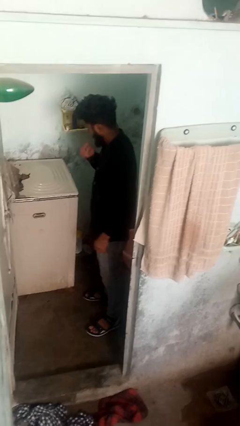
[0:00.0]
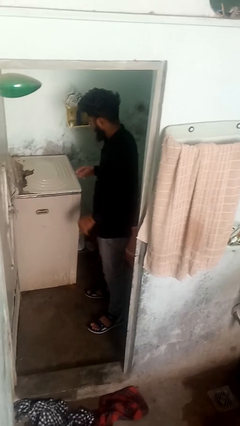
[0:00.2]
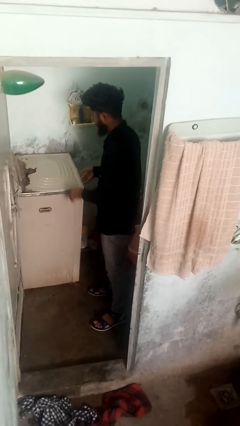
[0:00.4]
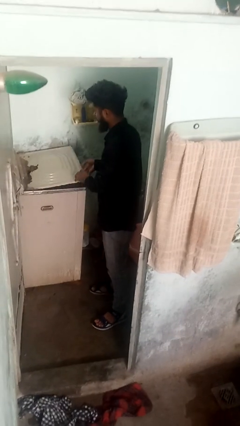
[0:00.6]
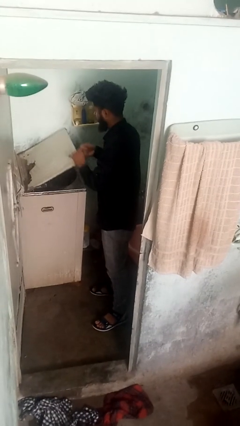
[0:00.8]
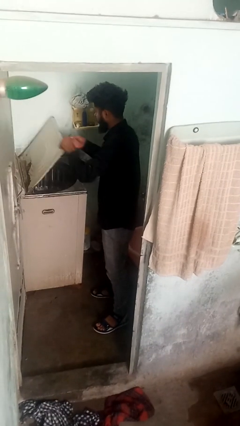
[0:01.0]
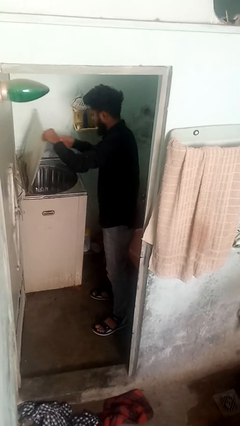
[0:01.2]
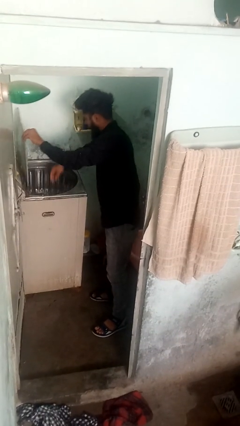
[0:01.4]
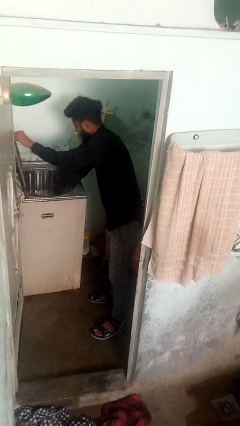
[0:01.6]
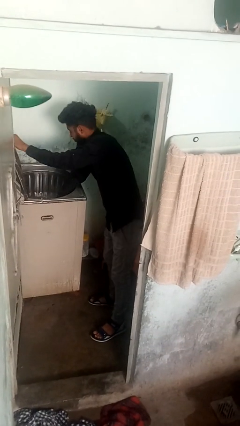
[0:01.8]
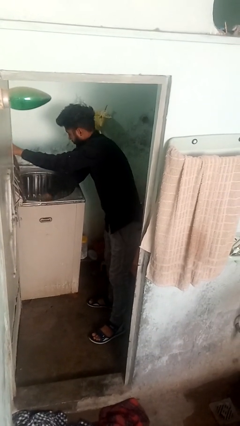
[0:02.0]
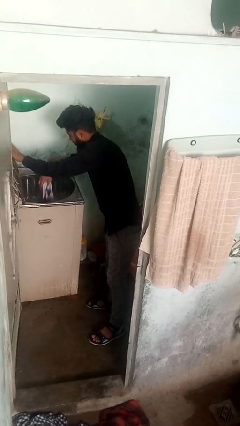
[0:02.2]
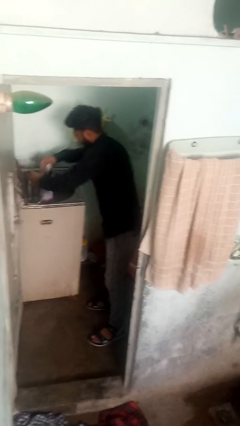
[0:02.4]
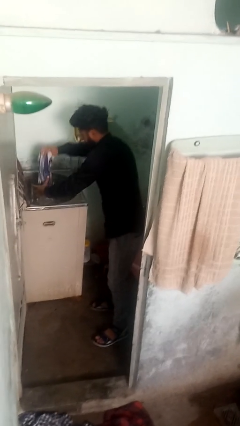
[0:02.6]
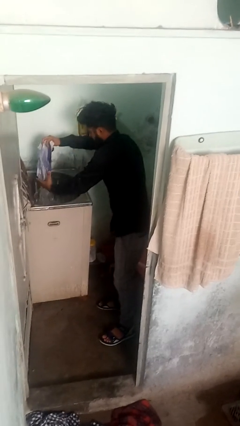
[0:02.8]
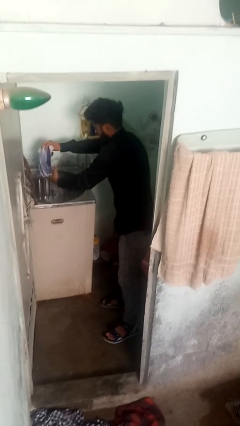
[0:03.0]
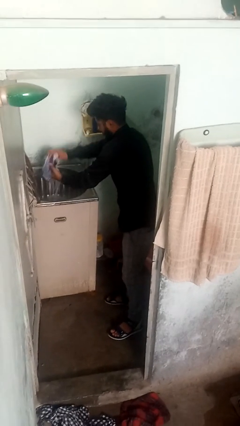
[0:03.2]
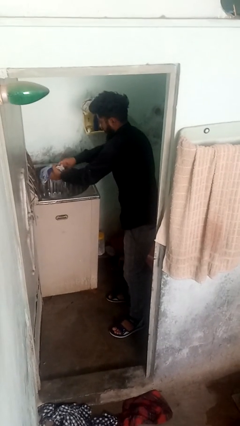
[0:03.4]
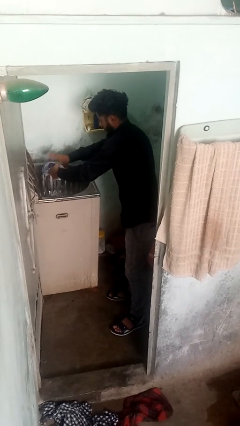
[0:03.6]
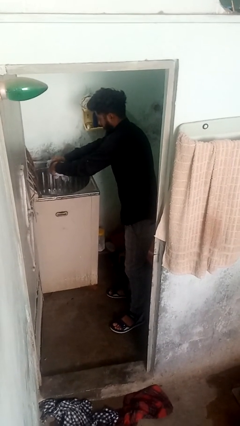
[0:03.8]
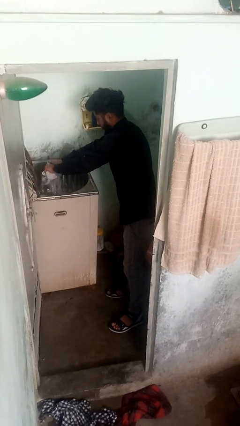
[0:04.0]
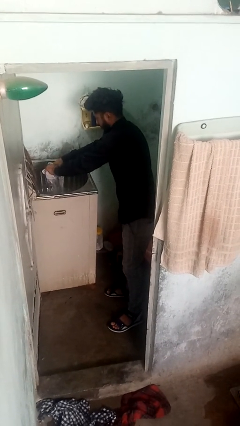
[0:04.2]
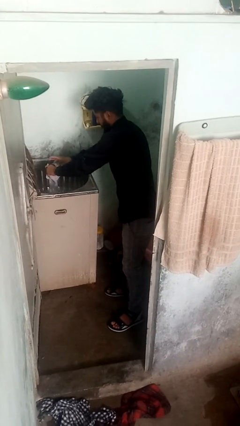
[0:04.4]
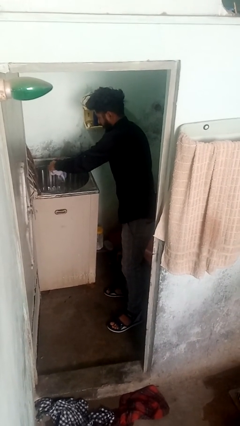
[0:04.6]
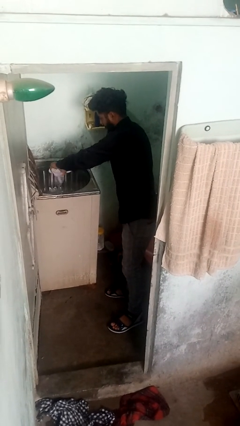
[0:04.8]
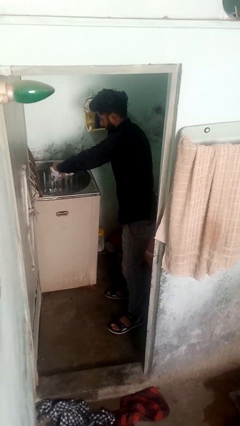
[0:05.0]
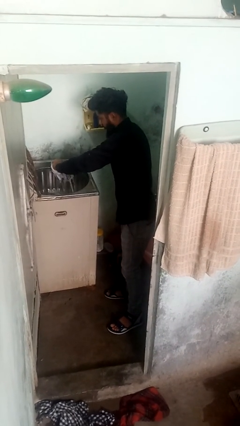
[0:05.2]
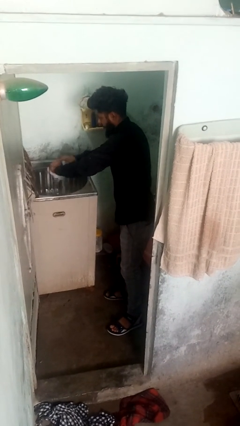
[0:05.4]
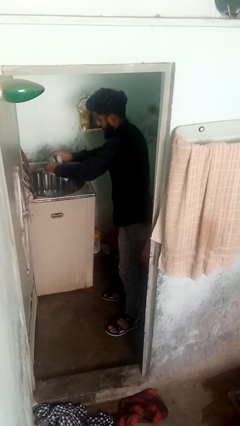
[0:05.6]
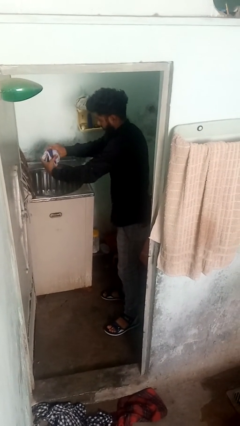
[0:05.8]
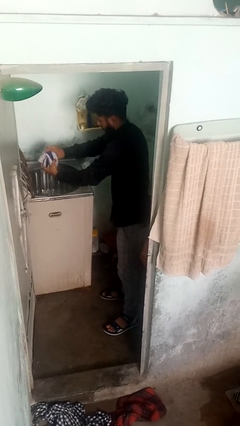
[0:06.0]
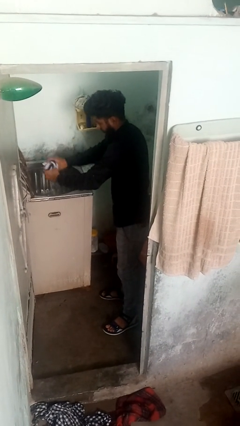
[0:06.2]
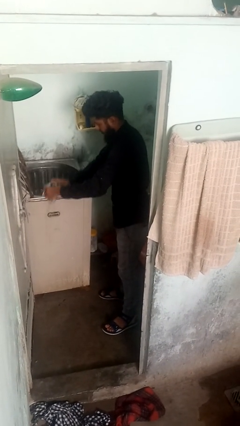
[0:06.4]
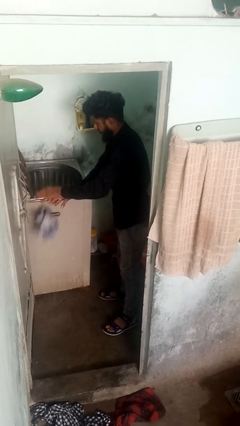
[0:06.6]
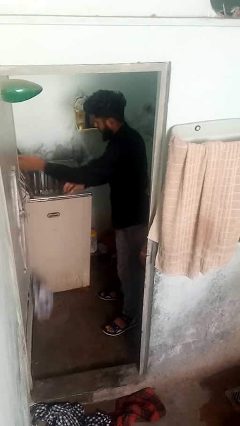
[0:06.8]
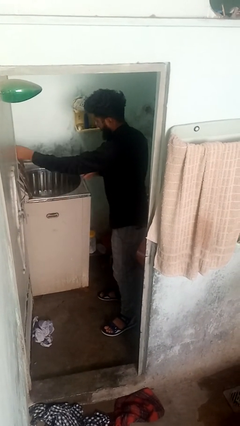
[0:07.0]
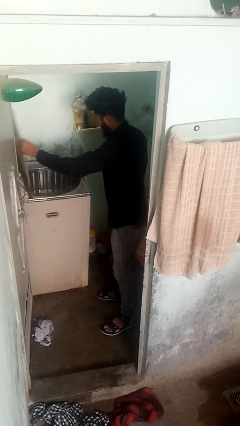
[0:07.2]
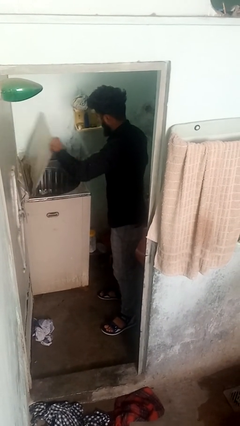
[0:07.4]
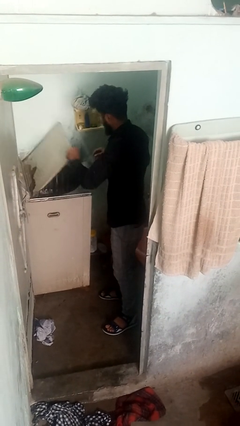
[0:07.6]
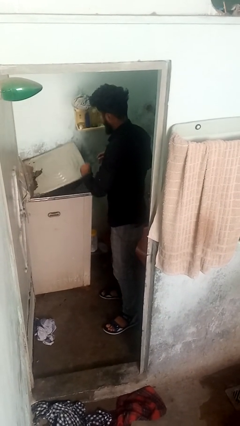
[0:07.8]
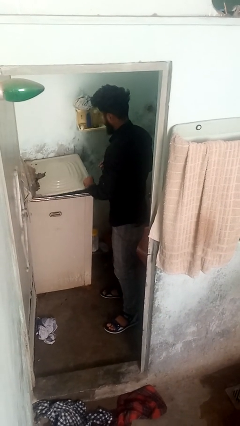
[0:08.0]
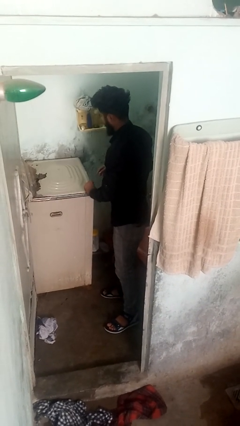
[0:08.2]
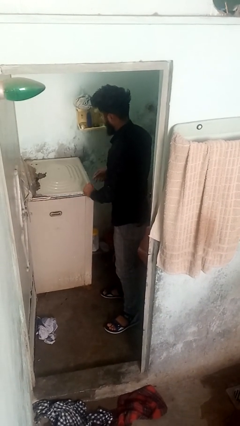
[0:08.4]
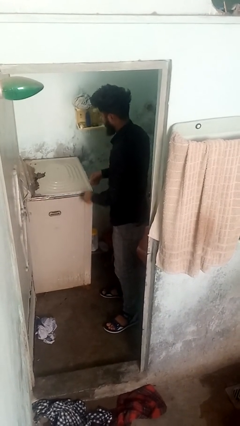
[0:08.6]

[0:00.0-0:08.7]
person unloads clotheswasher

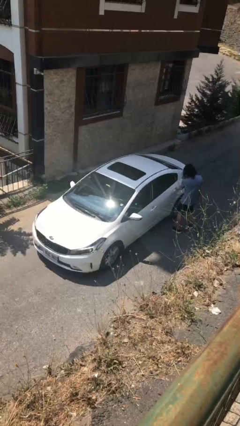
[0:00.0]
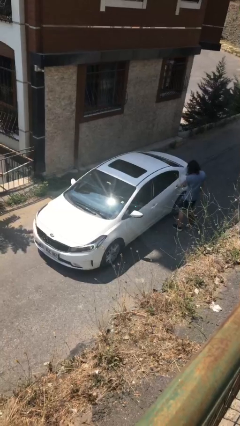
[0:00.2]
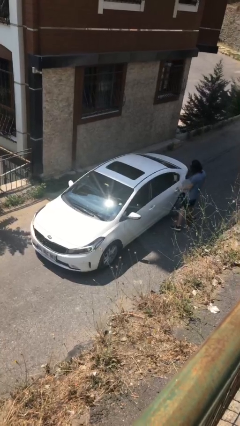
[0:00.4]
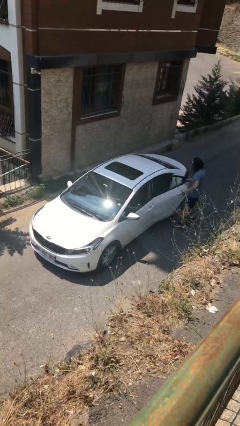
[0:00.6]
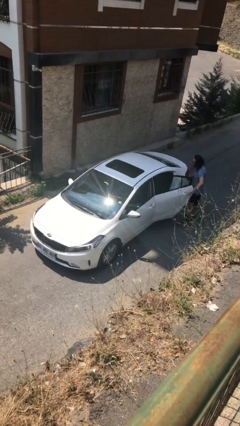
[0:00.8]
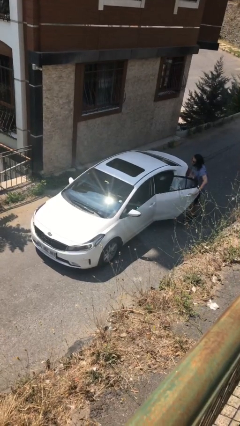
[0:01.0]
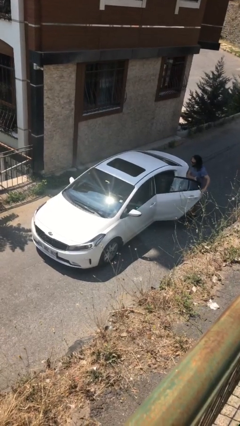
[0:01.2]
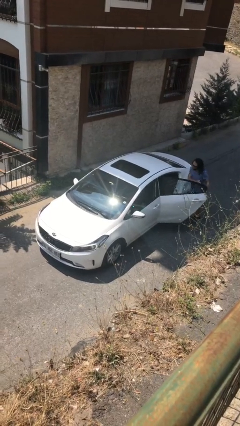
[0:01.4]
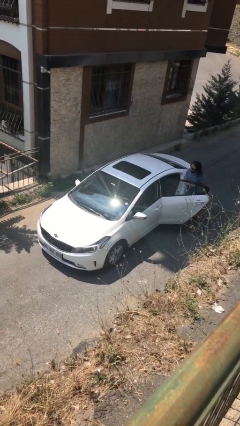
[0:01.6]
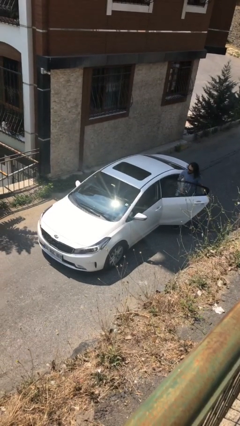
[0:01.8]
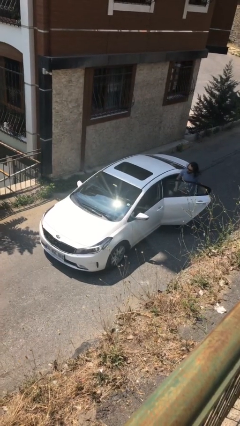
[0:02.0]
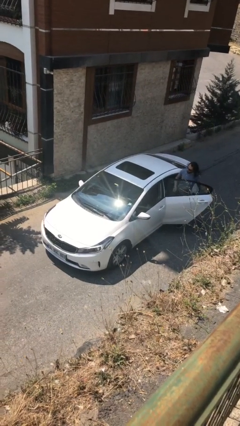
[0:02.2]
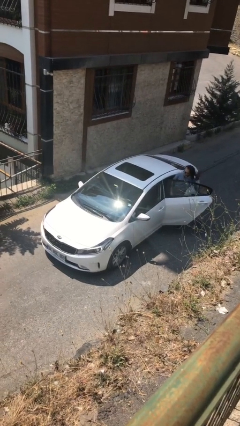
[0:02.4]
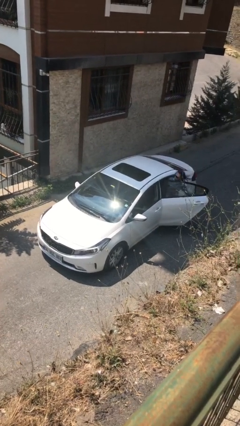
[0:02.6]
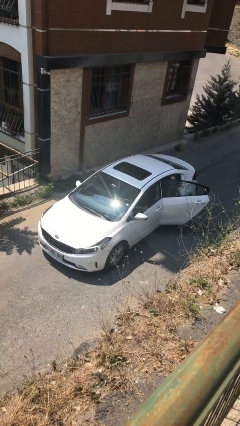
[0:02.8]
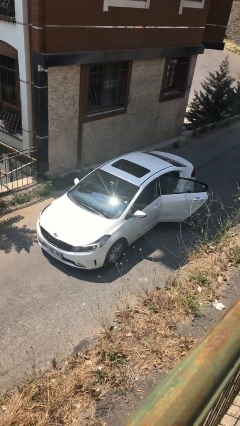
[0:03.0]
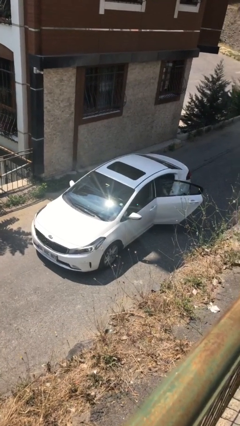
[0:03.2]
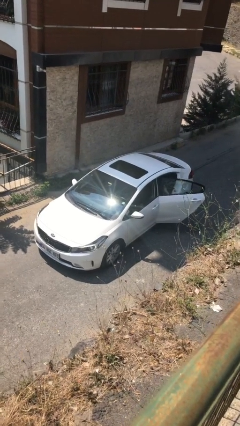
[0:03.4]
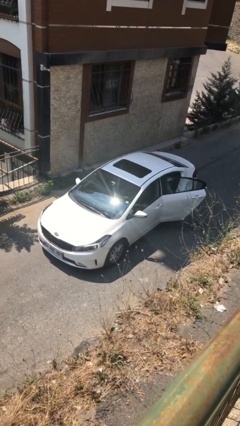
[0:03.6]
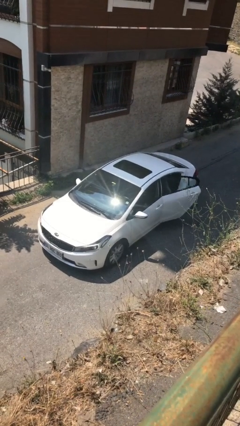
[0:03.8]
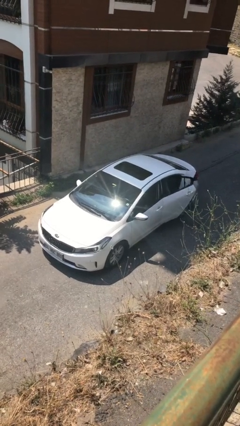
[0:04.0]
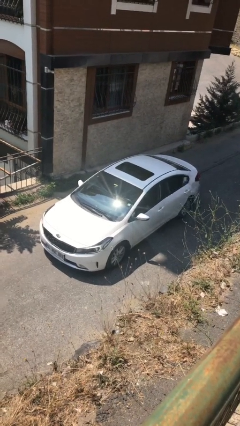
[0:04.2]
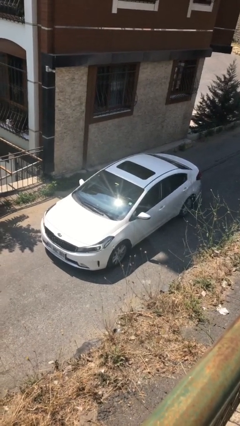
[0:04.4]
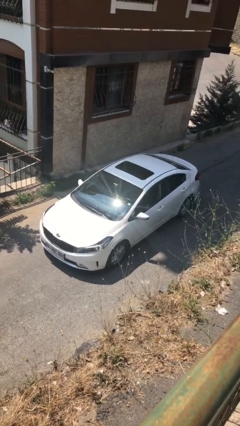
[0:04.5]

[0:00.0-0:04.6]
car picks up person

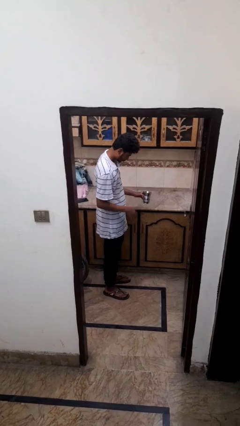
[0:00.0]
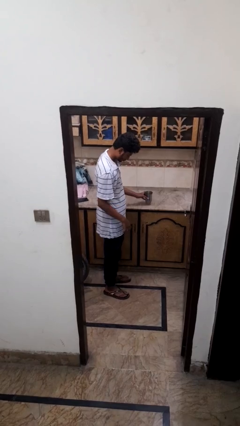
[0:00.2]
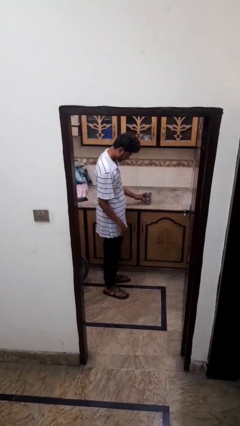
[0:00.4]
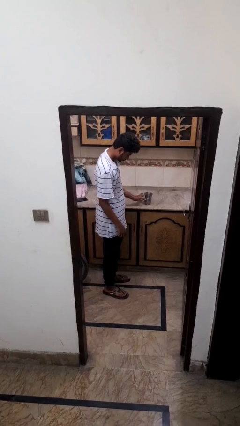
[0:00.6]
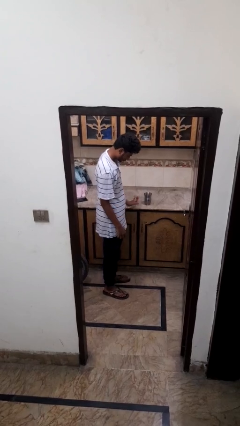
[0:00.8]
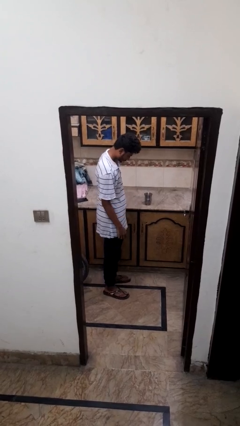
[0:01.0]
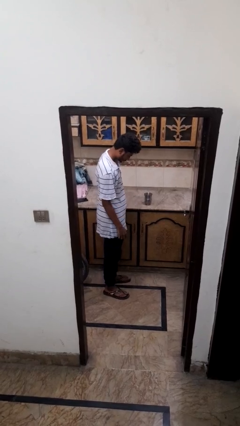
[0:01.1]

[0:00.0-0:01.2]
person puts down object on countertop

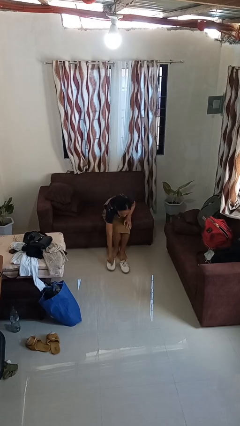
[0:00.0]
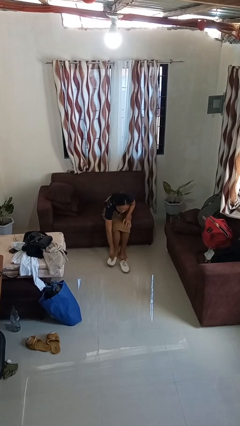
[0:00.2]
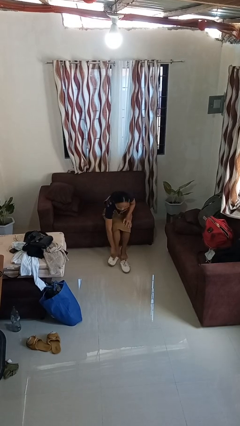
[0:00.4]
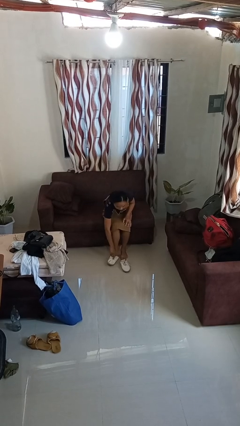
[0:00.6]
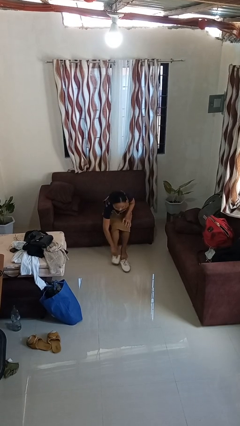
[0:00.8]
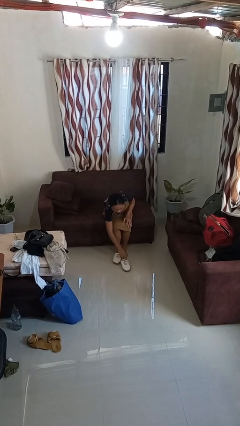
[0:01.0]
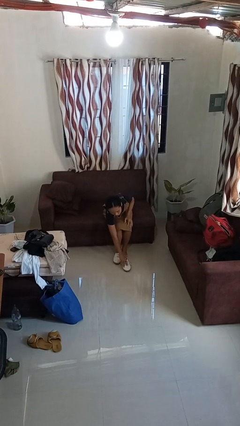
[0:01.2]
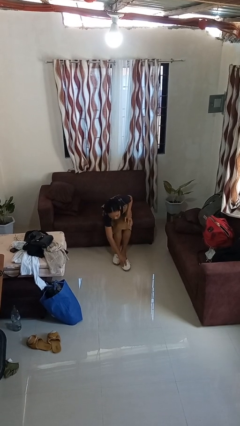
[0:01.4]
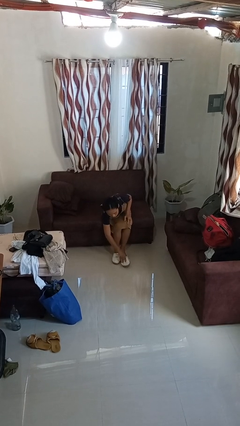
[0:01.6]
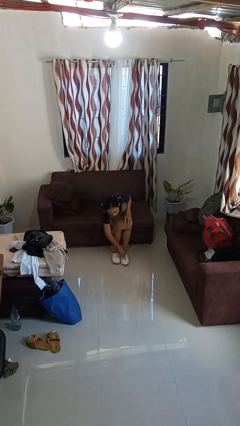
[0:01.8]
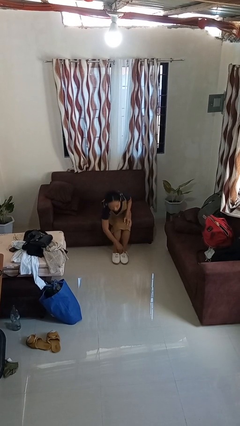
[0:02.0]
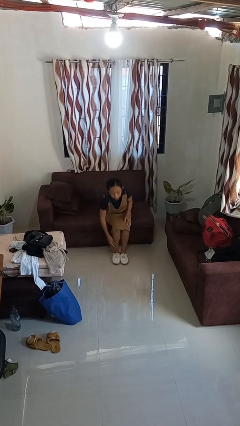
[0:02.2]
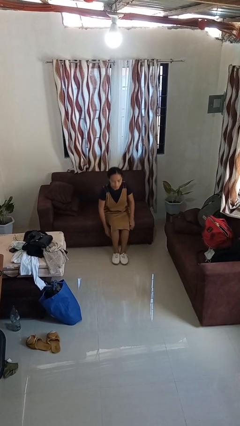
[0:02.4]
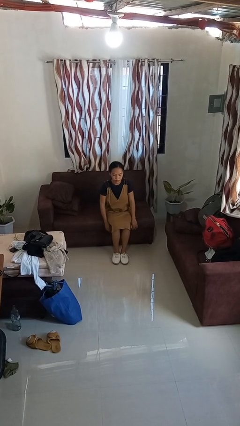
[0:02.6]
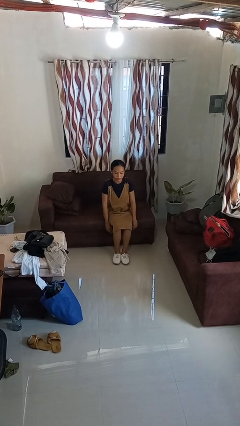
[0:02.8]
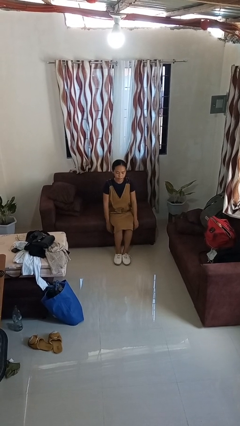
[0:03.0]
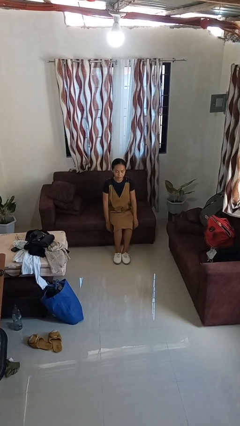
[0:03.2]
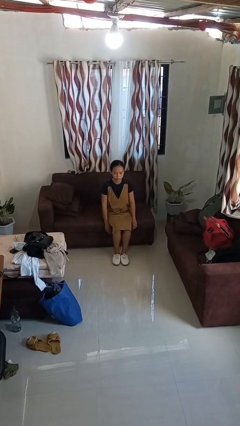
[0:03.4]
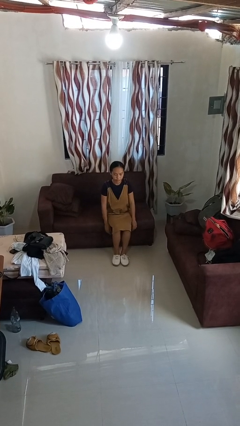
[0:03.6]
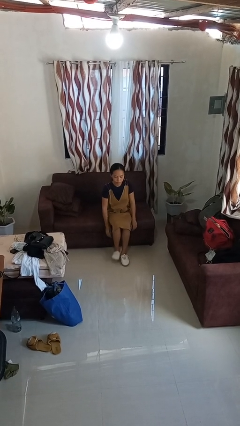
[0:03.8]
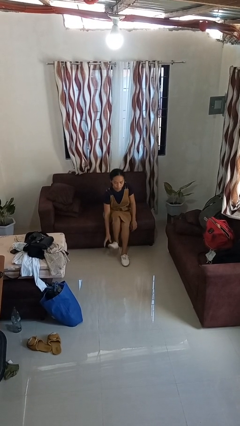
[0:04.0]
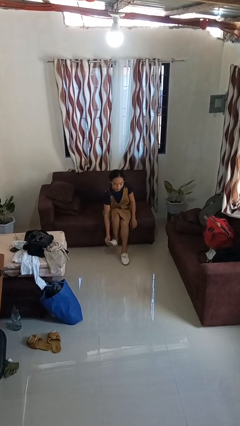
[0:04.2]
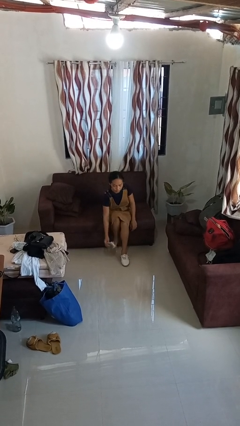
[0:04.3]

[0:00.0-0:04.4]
person puts on shoes
